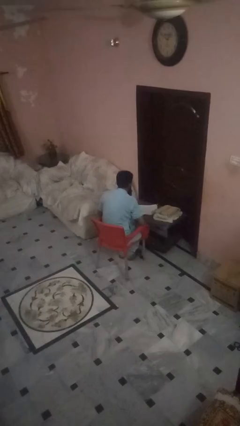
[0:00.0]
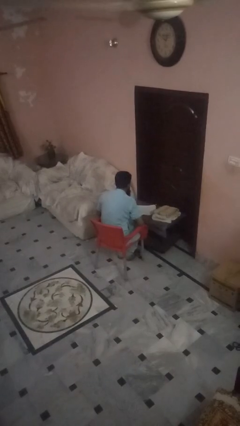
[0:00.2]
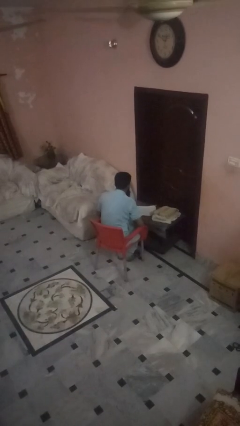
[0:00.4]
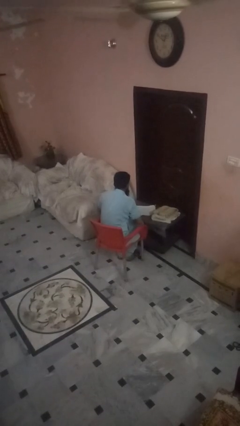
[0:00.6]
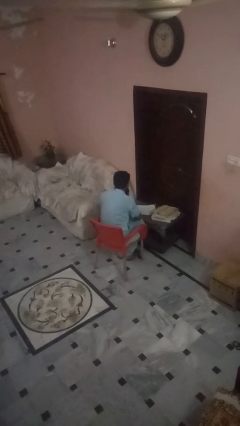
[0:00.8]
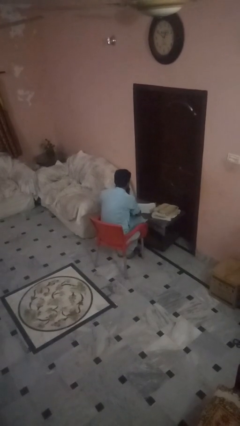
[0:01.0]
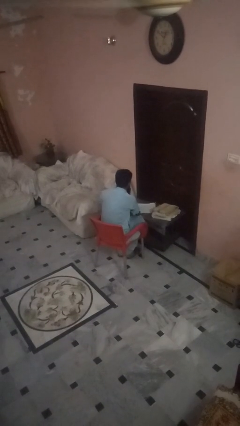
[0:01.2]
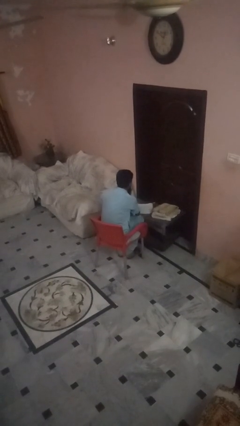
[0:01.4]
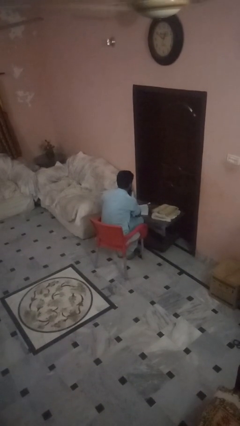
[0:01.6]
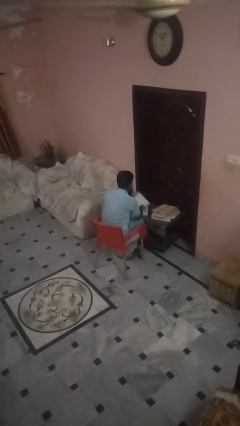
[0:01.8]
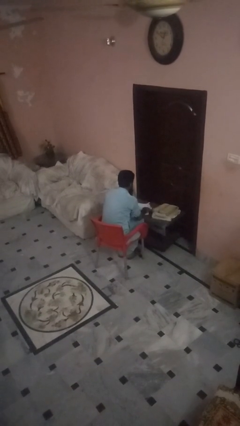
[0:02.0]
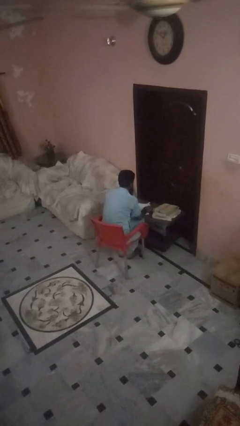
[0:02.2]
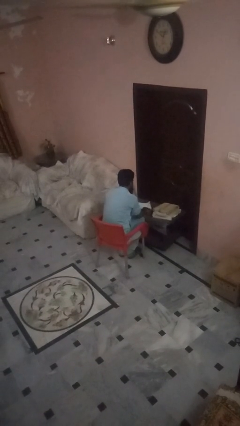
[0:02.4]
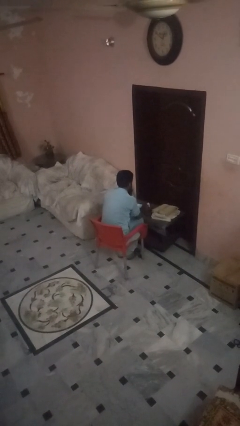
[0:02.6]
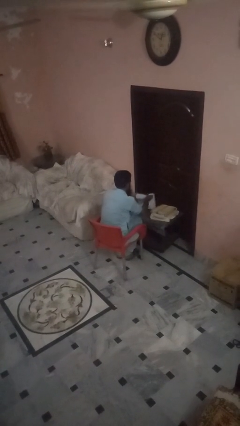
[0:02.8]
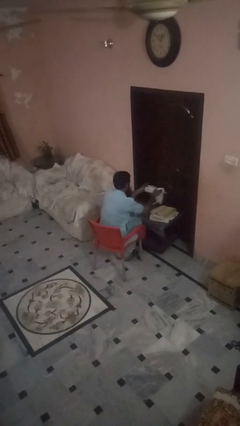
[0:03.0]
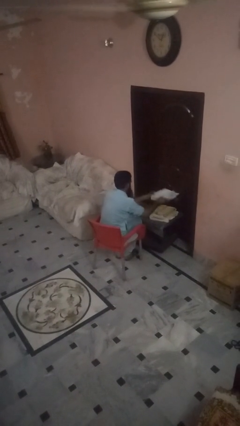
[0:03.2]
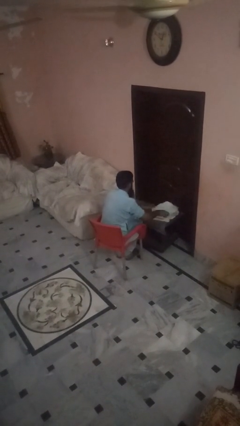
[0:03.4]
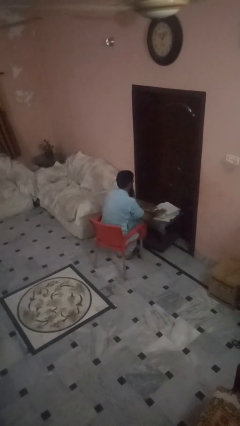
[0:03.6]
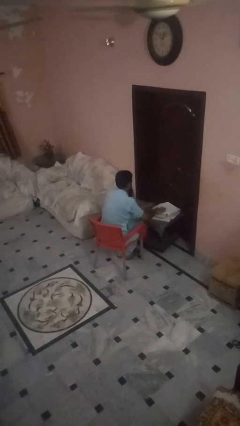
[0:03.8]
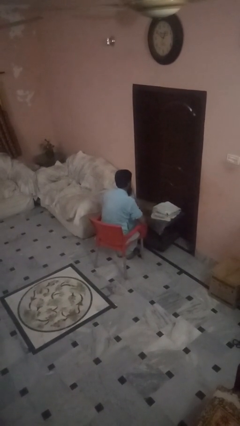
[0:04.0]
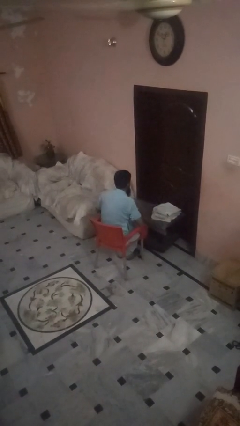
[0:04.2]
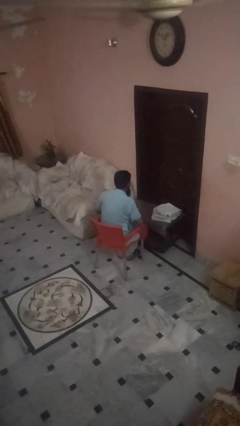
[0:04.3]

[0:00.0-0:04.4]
person folds towel

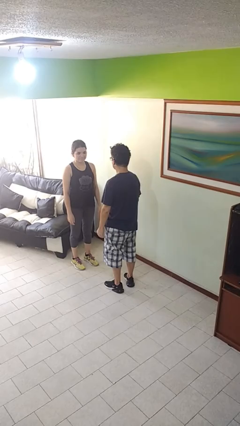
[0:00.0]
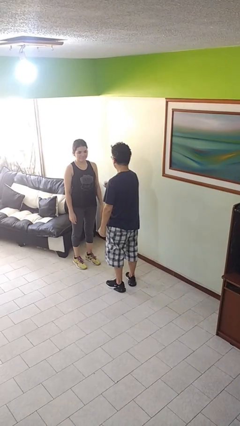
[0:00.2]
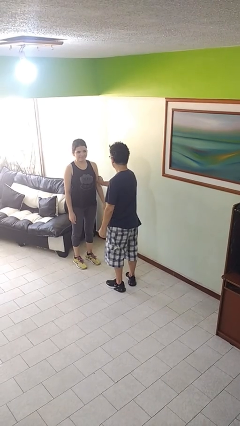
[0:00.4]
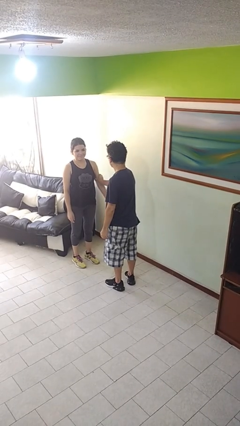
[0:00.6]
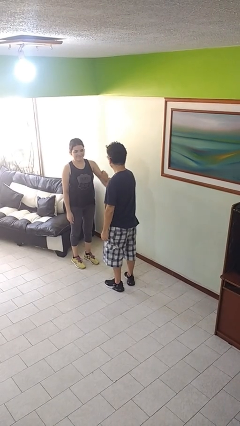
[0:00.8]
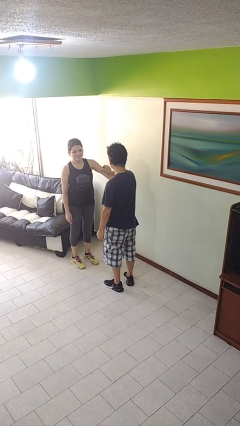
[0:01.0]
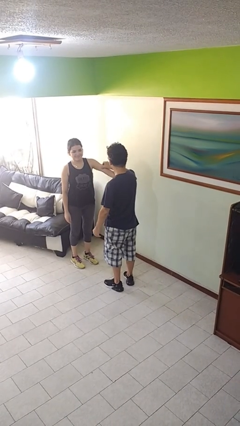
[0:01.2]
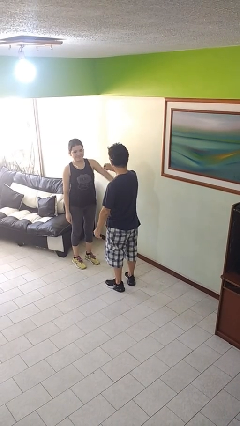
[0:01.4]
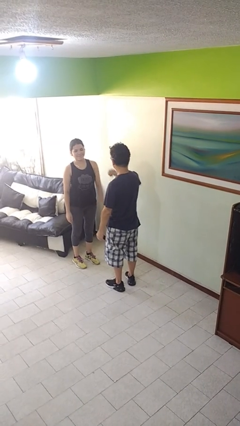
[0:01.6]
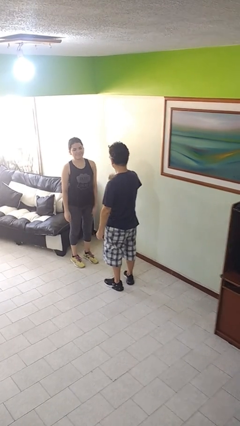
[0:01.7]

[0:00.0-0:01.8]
person grabs person by bicep

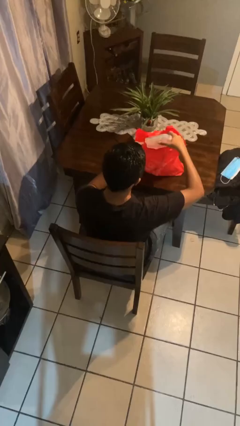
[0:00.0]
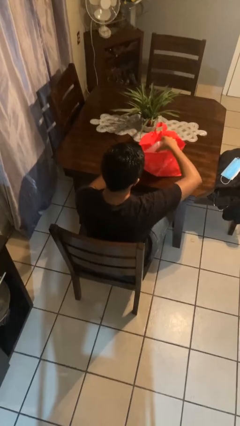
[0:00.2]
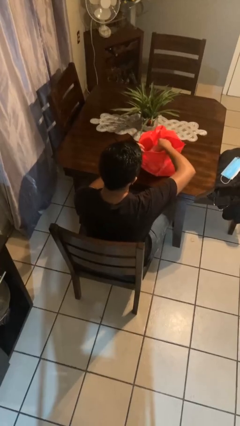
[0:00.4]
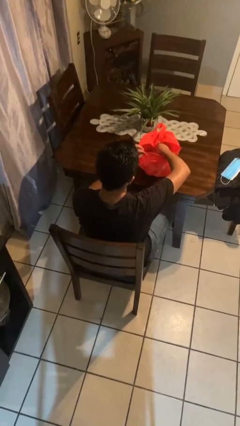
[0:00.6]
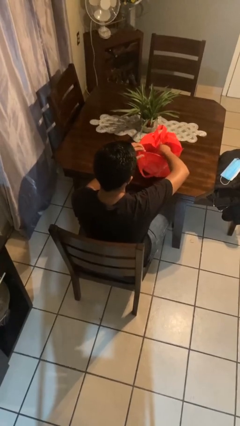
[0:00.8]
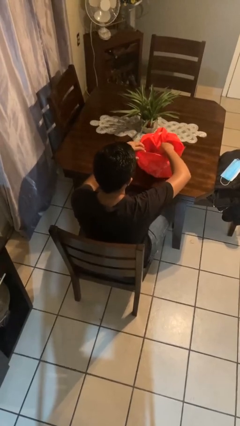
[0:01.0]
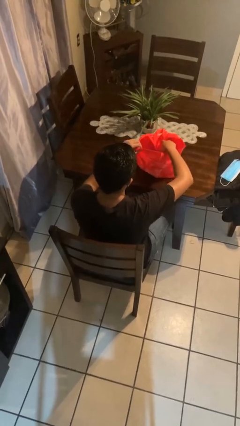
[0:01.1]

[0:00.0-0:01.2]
person puts object into bag

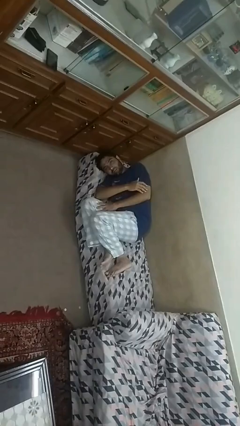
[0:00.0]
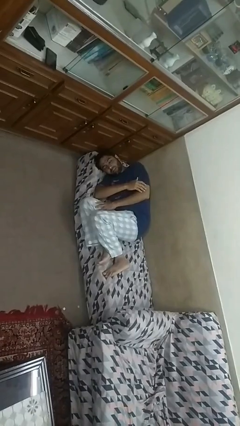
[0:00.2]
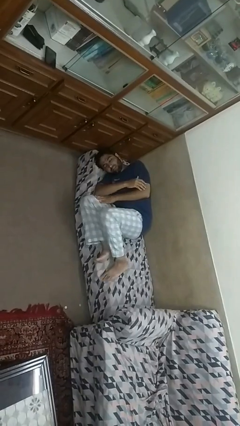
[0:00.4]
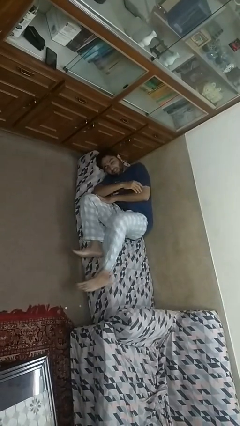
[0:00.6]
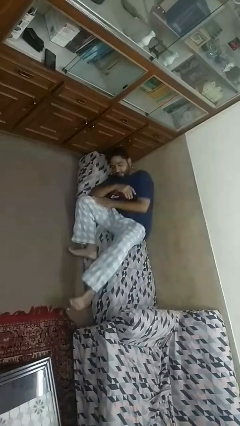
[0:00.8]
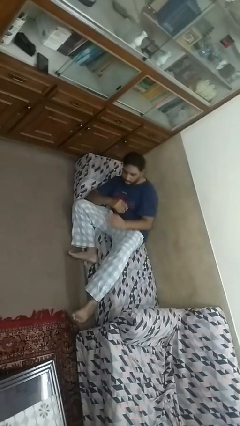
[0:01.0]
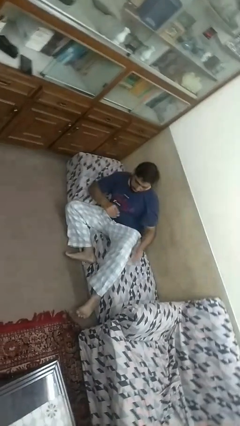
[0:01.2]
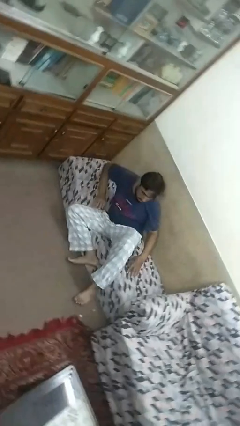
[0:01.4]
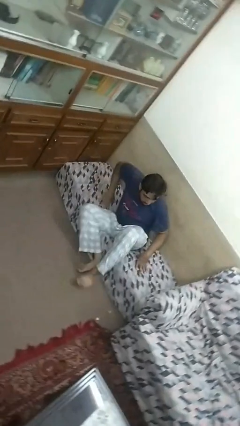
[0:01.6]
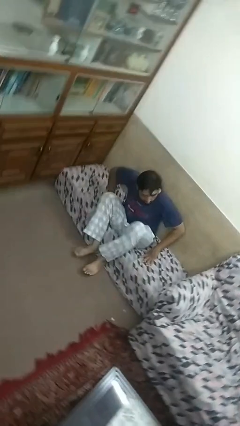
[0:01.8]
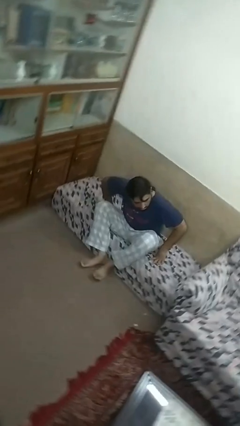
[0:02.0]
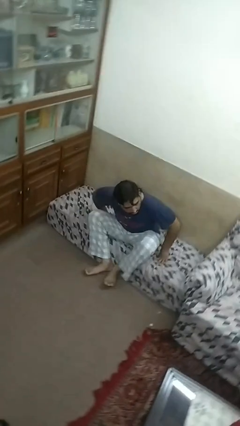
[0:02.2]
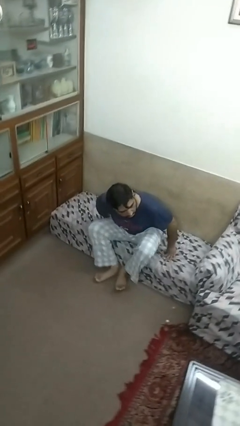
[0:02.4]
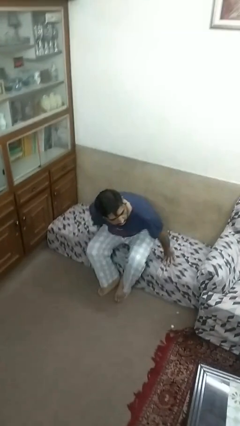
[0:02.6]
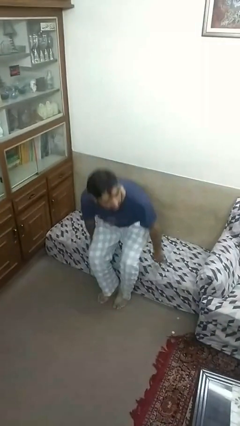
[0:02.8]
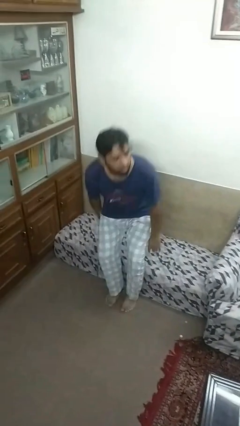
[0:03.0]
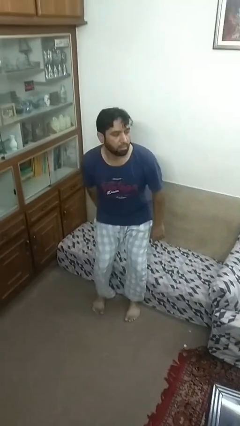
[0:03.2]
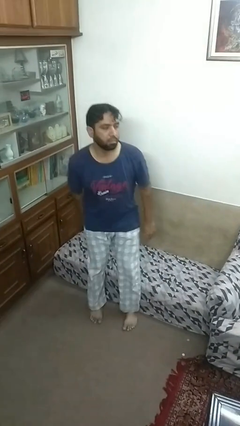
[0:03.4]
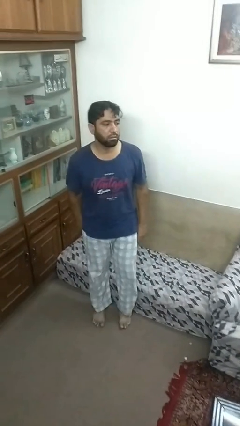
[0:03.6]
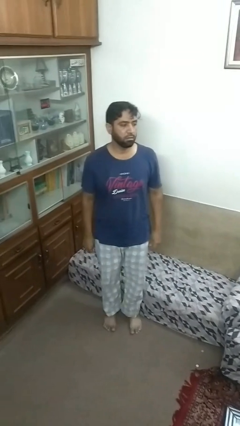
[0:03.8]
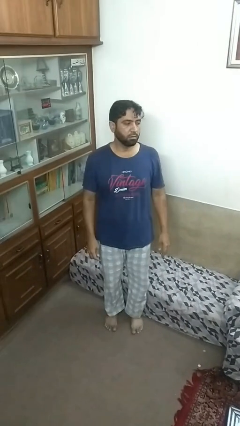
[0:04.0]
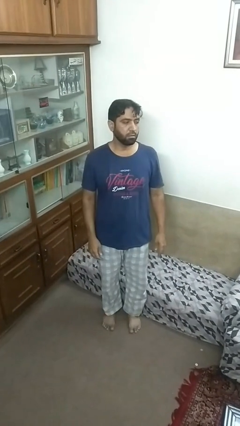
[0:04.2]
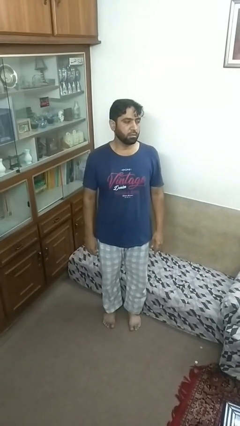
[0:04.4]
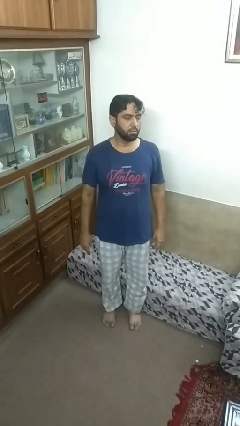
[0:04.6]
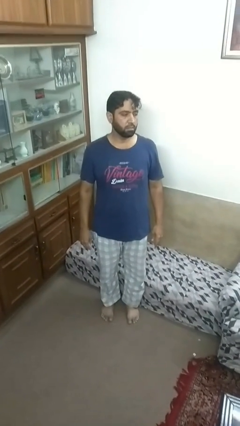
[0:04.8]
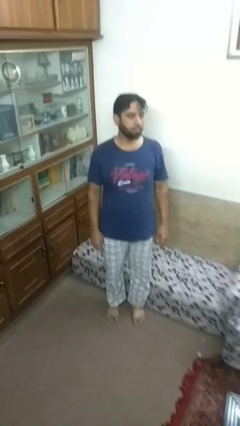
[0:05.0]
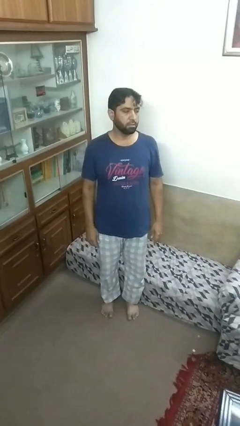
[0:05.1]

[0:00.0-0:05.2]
person stands up

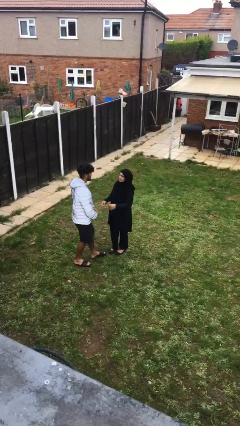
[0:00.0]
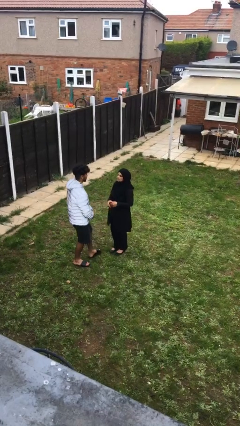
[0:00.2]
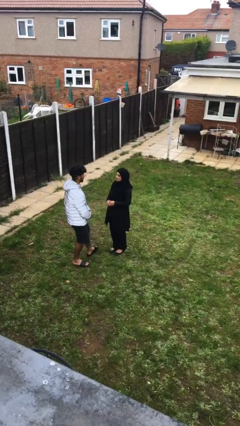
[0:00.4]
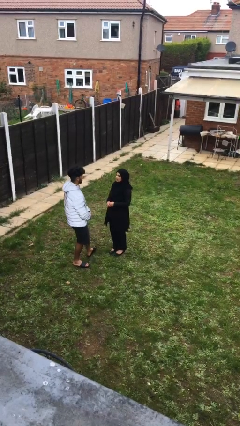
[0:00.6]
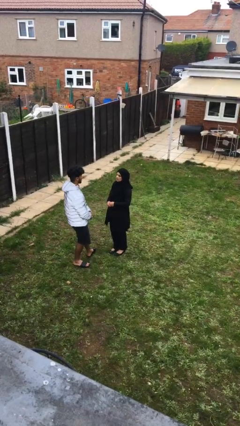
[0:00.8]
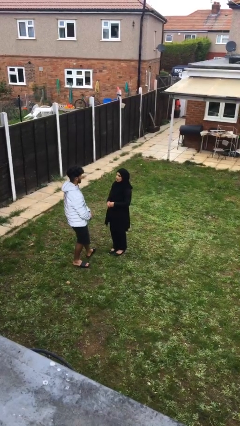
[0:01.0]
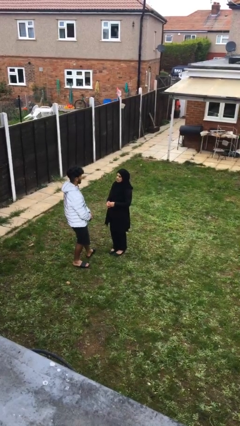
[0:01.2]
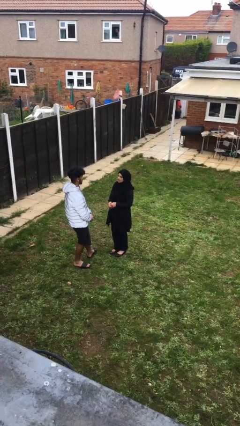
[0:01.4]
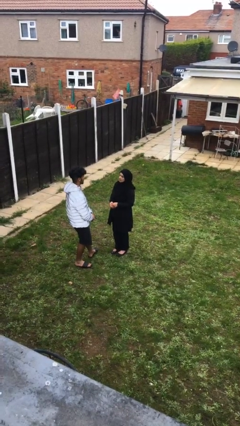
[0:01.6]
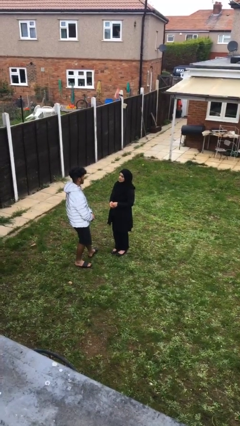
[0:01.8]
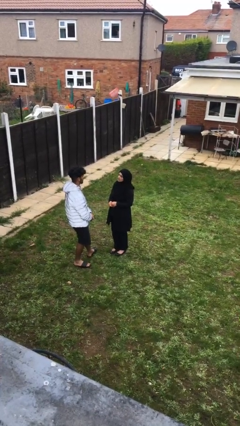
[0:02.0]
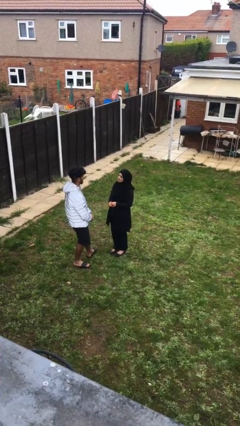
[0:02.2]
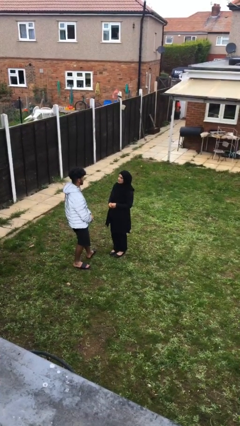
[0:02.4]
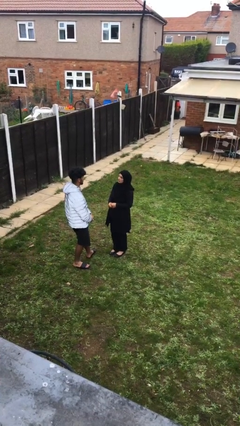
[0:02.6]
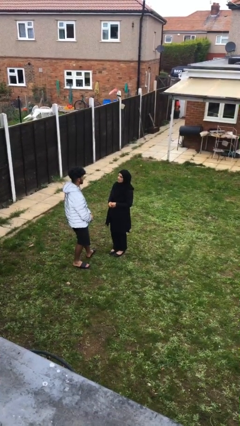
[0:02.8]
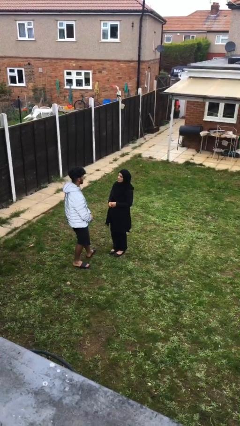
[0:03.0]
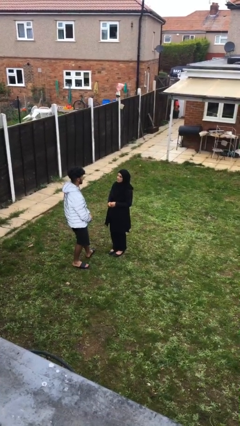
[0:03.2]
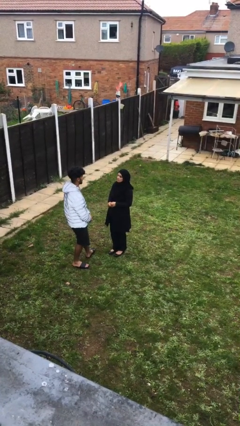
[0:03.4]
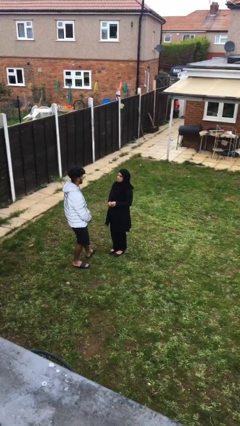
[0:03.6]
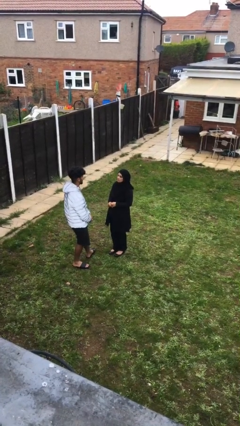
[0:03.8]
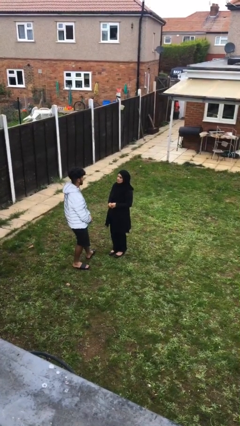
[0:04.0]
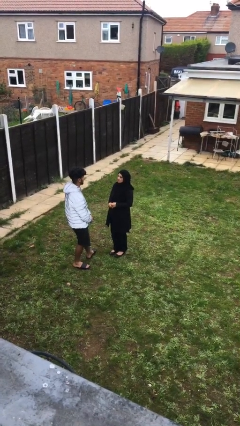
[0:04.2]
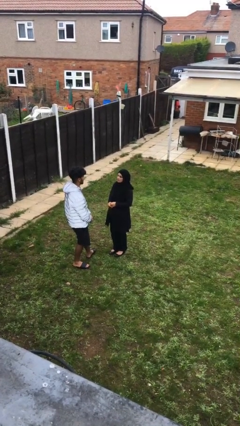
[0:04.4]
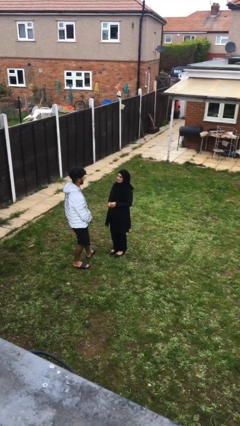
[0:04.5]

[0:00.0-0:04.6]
person talks to person
